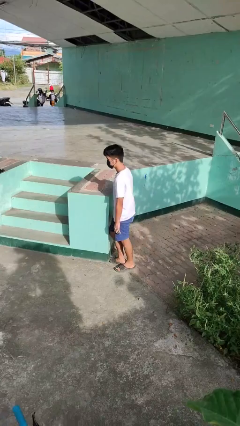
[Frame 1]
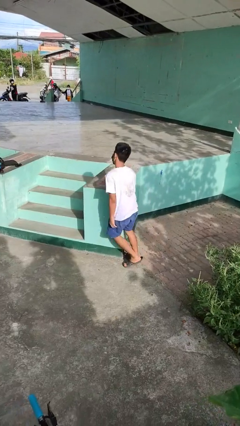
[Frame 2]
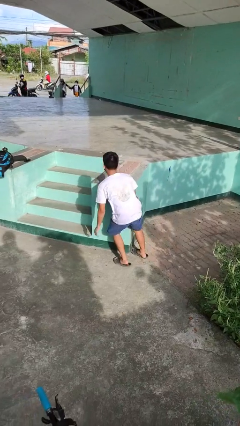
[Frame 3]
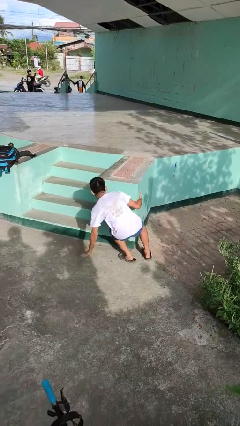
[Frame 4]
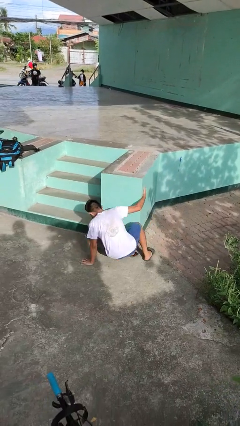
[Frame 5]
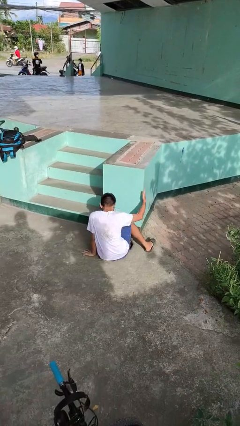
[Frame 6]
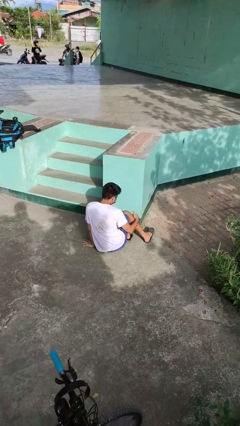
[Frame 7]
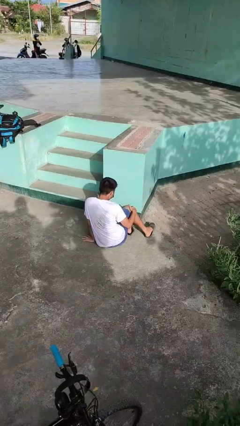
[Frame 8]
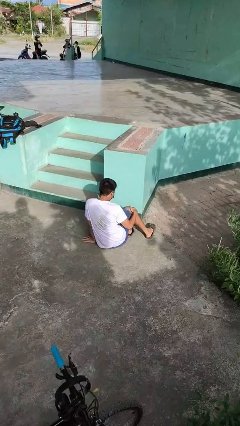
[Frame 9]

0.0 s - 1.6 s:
person trips on object on floor

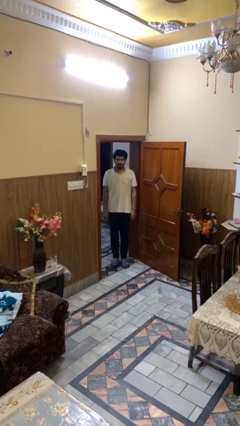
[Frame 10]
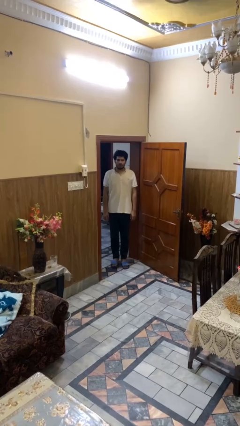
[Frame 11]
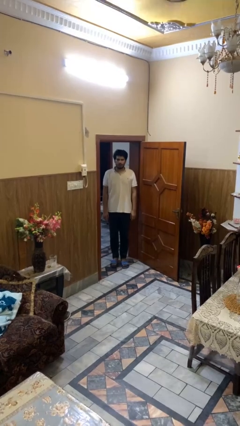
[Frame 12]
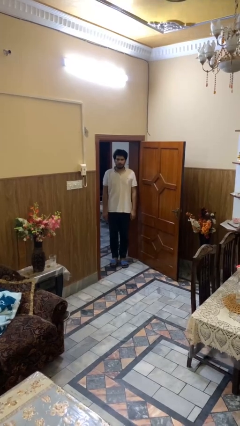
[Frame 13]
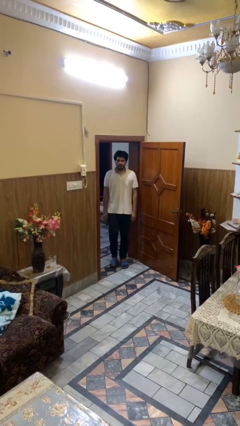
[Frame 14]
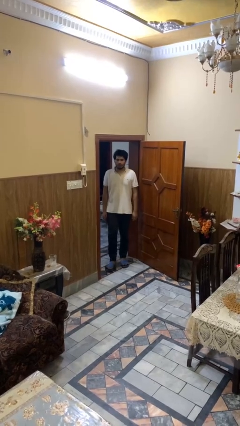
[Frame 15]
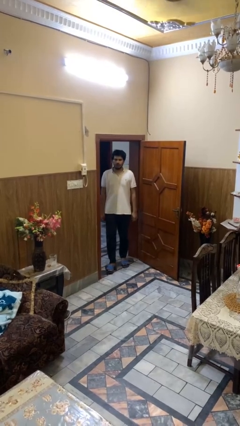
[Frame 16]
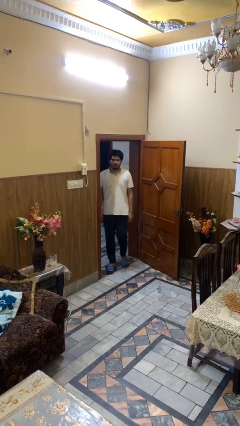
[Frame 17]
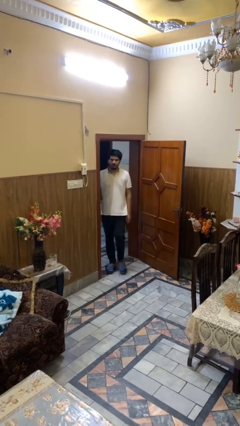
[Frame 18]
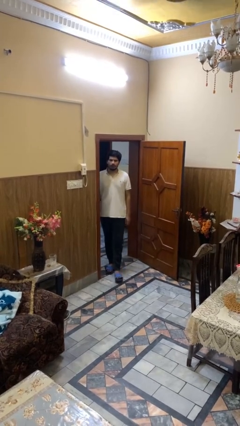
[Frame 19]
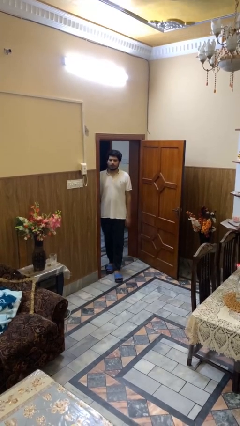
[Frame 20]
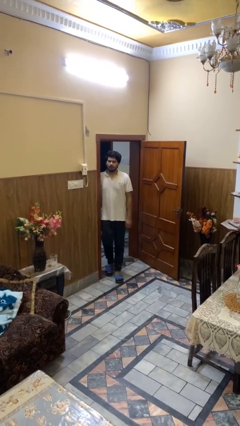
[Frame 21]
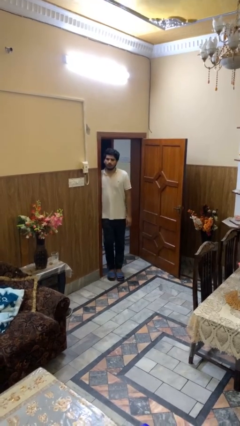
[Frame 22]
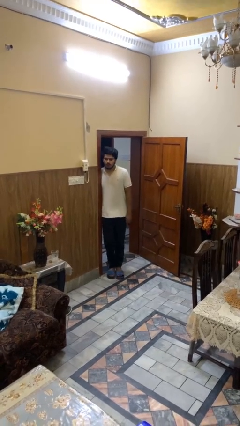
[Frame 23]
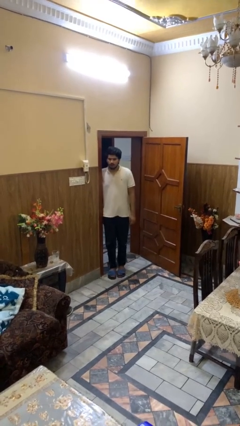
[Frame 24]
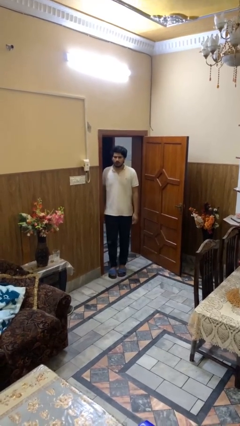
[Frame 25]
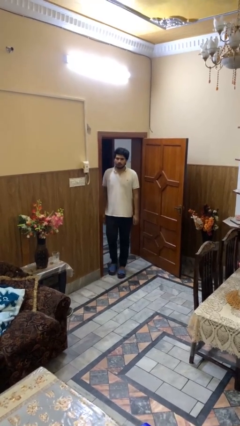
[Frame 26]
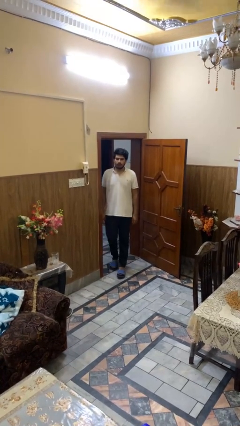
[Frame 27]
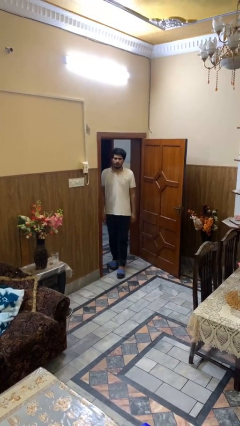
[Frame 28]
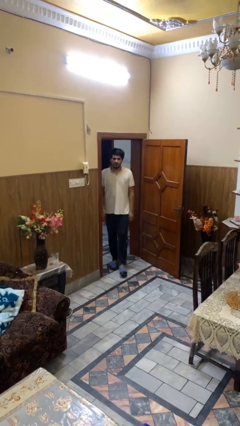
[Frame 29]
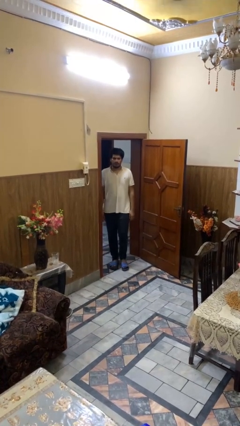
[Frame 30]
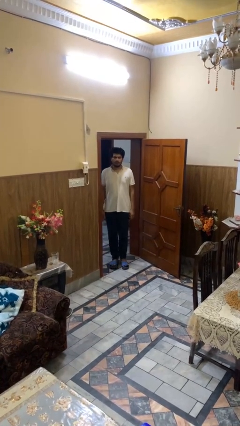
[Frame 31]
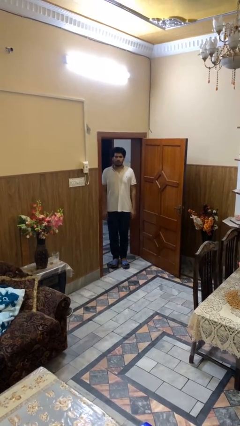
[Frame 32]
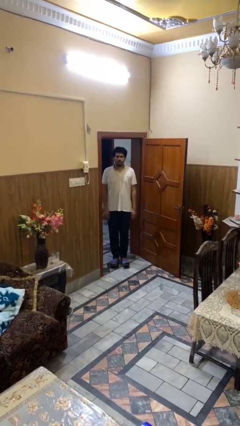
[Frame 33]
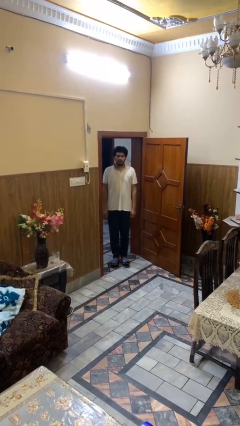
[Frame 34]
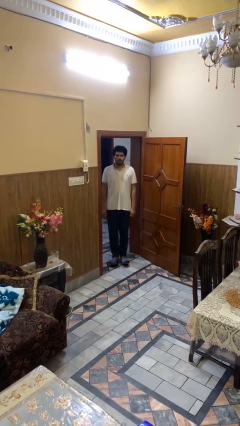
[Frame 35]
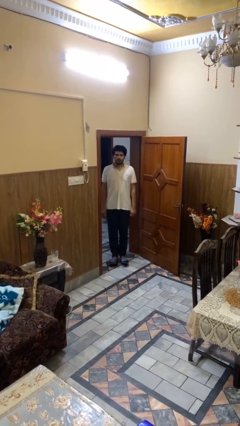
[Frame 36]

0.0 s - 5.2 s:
person bumps into wall

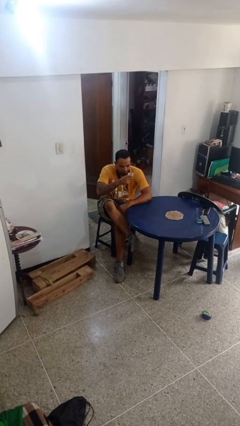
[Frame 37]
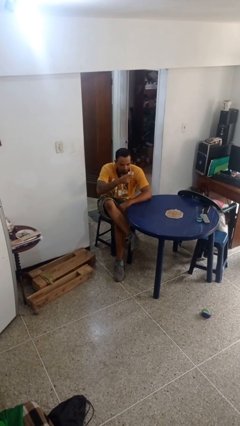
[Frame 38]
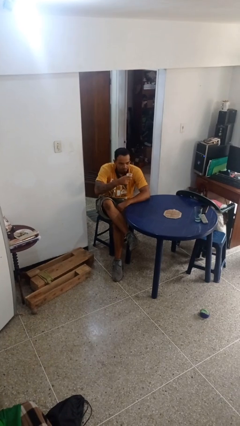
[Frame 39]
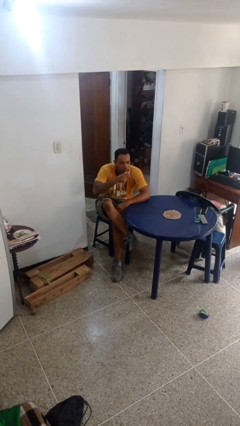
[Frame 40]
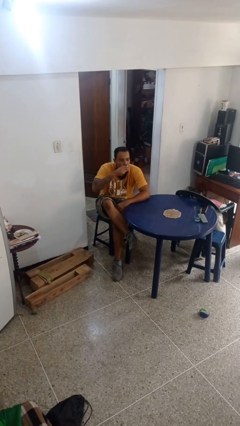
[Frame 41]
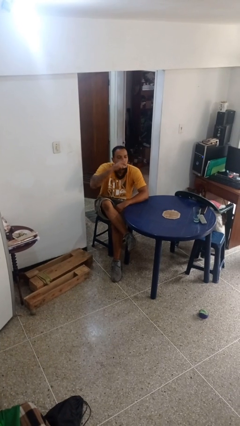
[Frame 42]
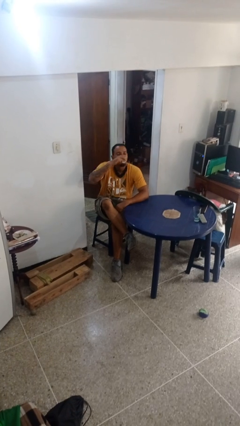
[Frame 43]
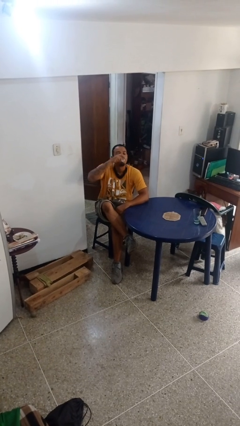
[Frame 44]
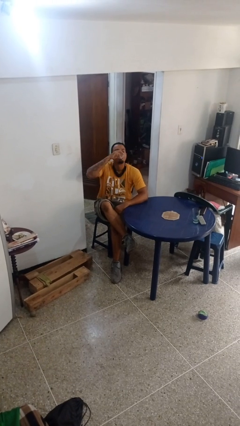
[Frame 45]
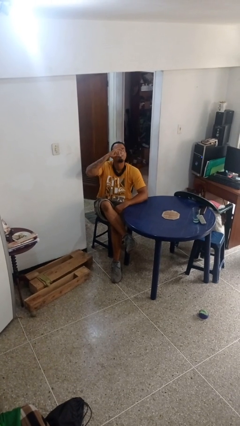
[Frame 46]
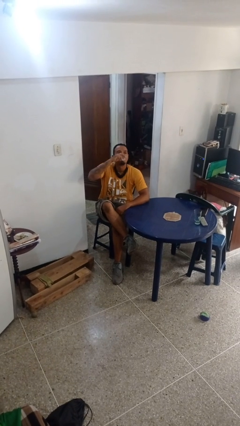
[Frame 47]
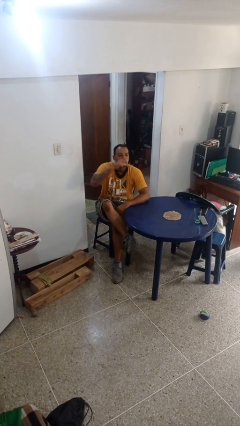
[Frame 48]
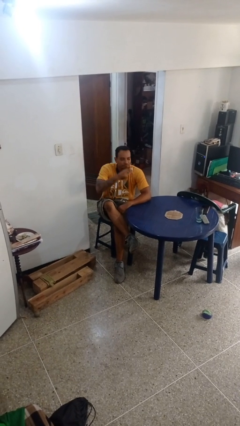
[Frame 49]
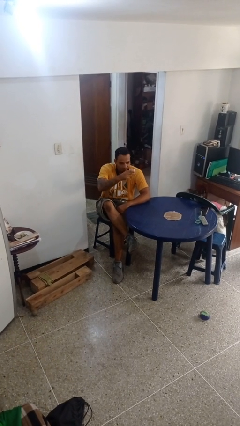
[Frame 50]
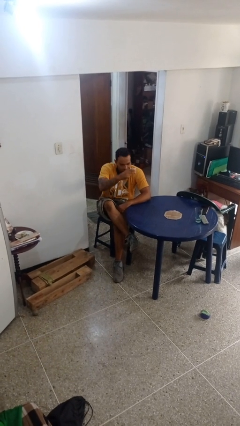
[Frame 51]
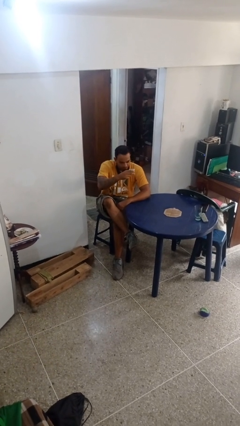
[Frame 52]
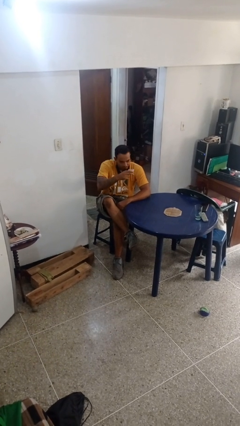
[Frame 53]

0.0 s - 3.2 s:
person drinks from shotglass

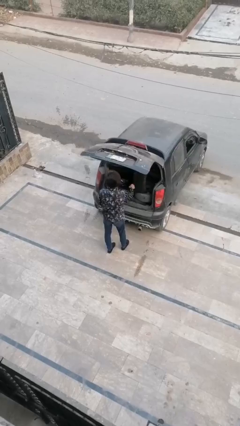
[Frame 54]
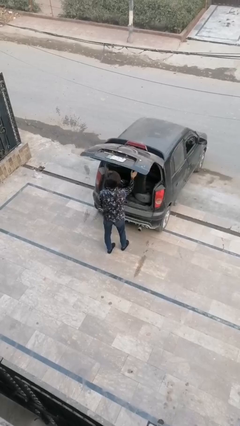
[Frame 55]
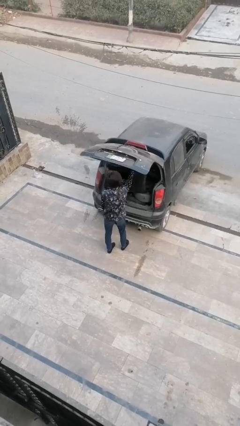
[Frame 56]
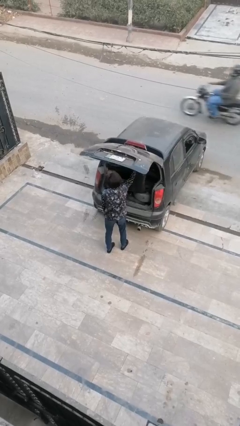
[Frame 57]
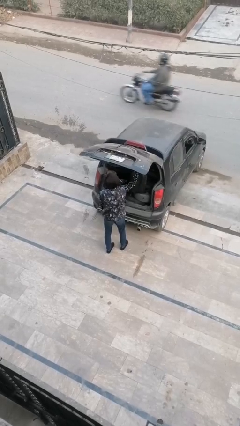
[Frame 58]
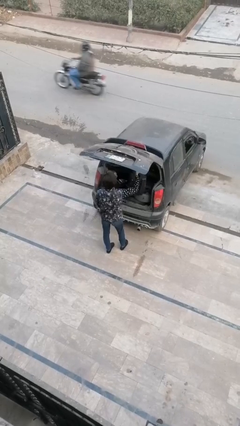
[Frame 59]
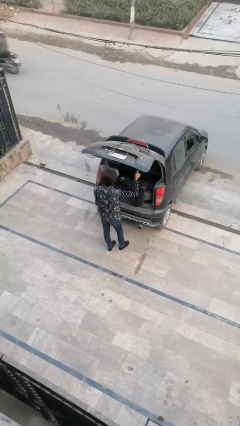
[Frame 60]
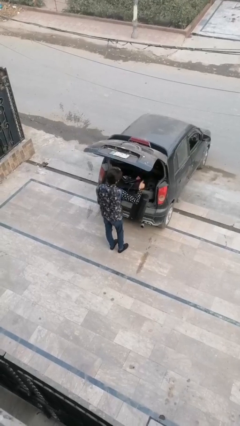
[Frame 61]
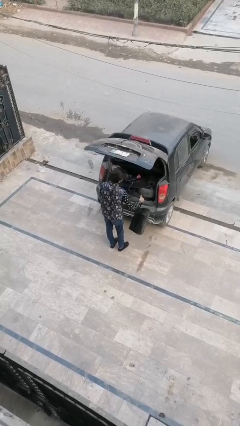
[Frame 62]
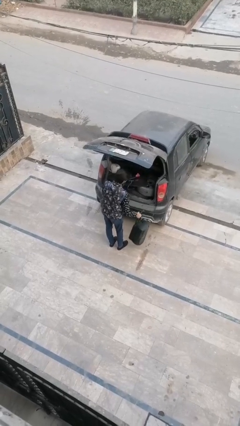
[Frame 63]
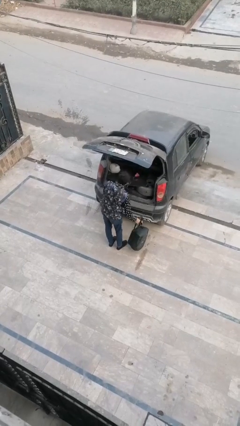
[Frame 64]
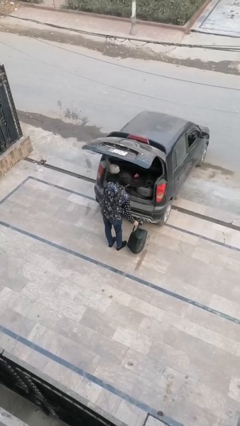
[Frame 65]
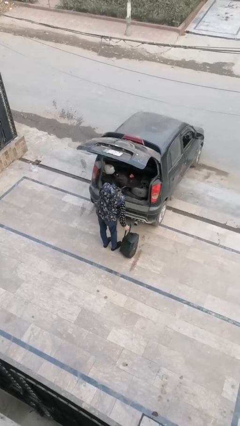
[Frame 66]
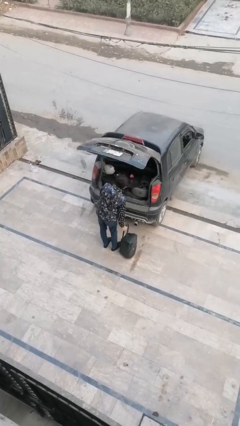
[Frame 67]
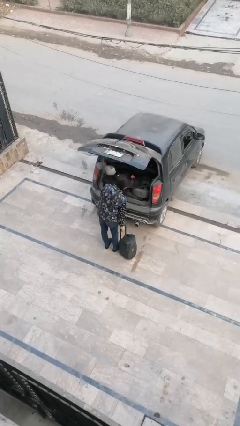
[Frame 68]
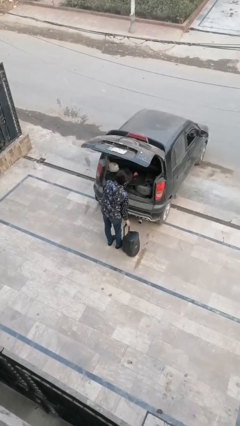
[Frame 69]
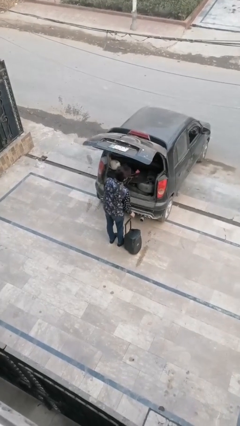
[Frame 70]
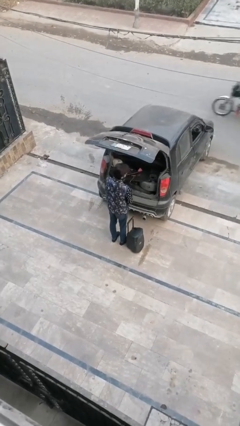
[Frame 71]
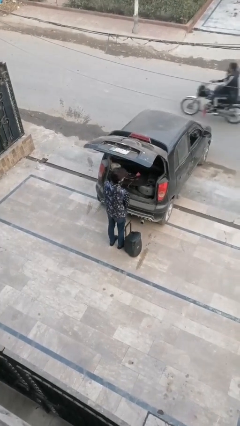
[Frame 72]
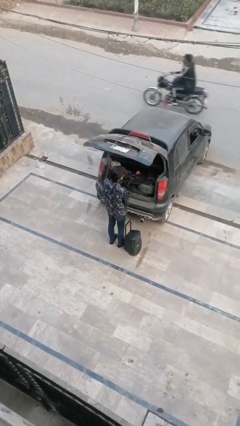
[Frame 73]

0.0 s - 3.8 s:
person unloads car

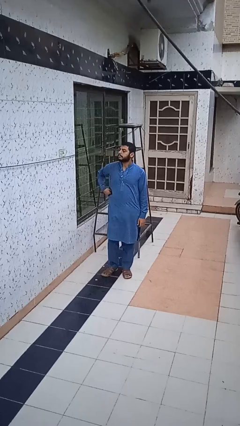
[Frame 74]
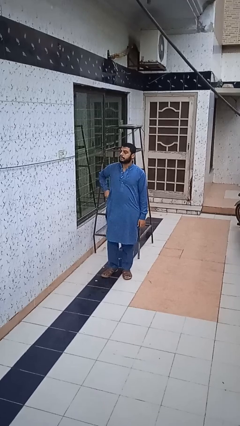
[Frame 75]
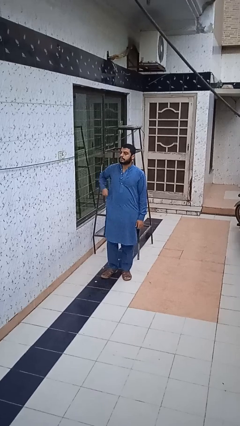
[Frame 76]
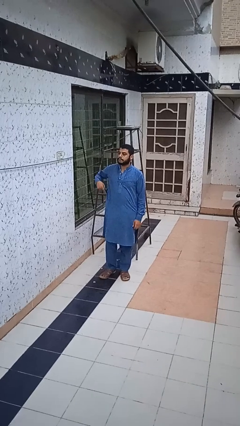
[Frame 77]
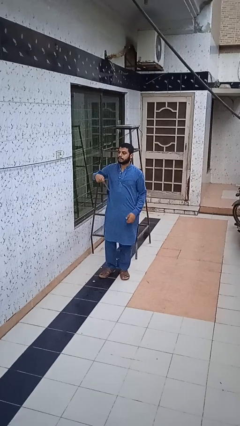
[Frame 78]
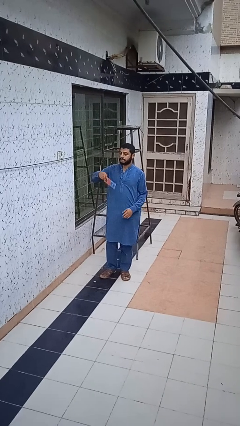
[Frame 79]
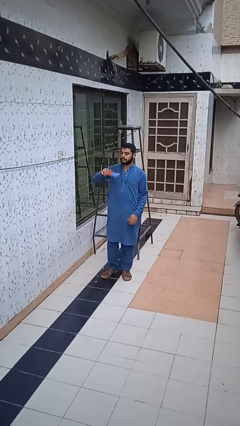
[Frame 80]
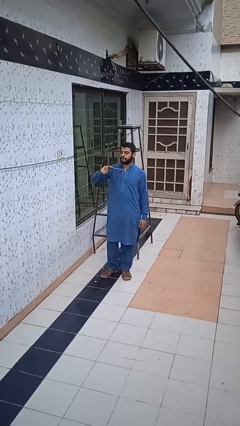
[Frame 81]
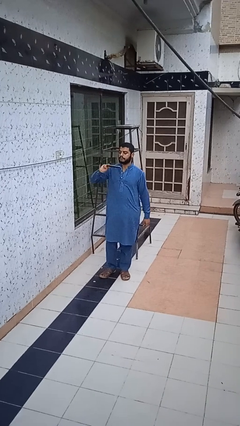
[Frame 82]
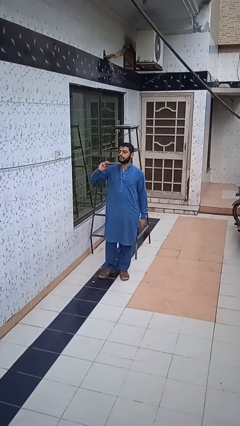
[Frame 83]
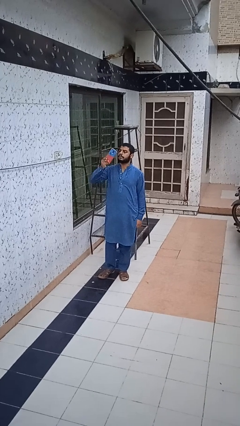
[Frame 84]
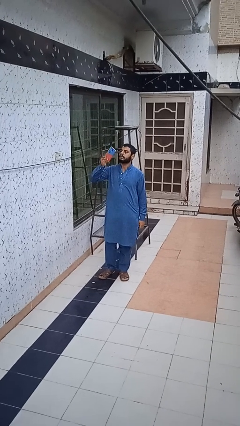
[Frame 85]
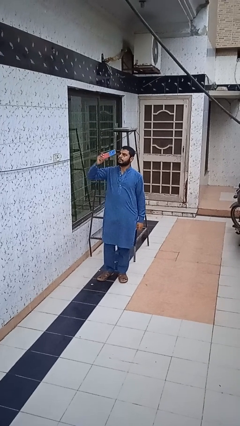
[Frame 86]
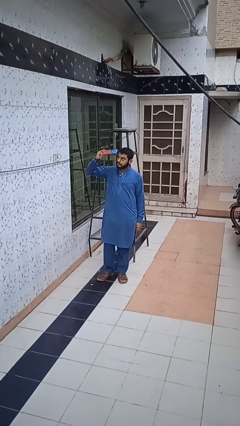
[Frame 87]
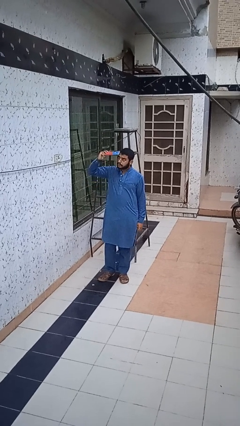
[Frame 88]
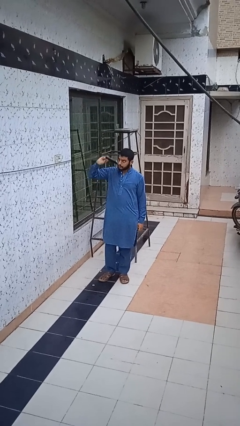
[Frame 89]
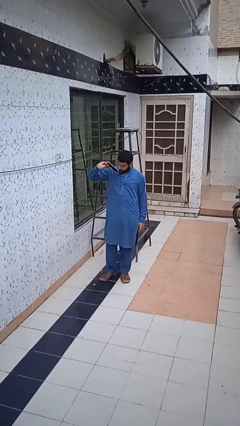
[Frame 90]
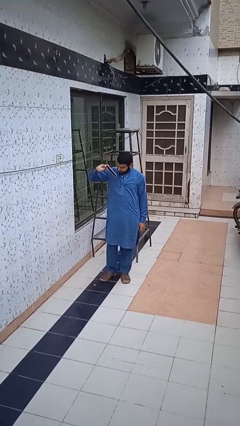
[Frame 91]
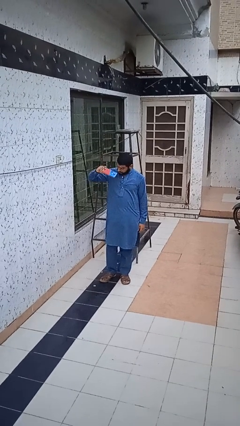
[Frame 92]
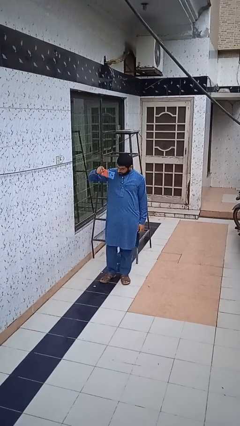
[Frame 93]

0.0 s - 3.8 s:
person takes phone from pocket
